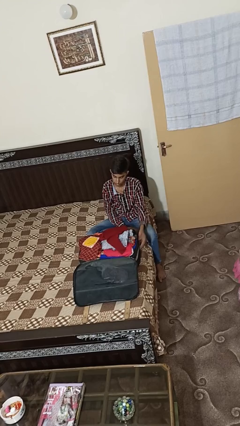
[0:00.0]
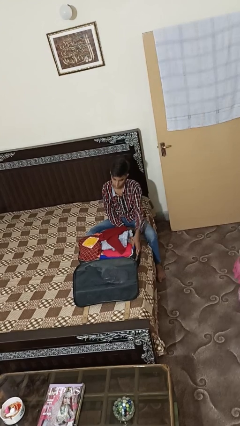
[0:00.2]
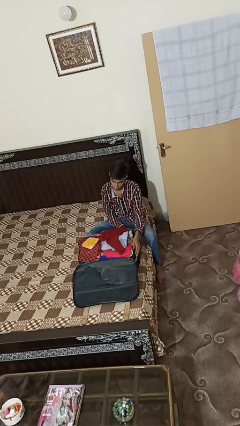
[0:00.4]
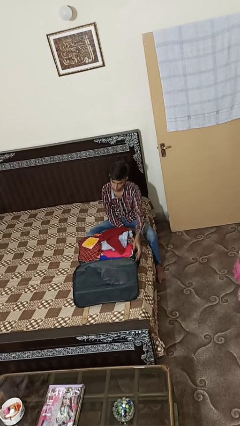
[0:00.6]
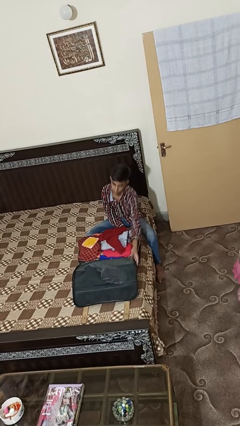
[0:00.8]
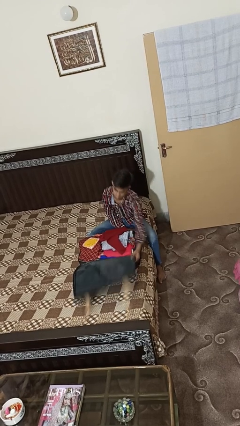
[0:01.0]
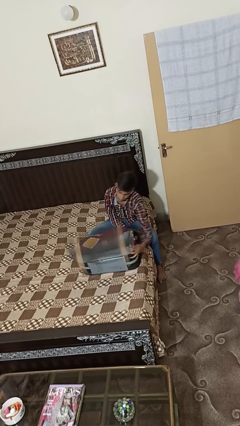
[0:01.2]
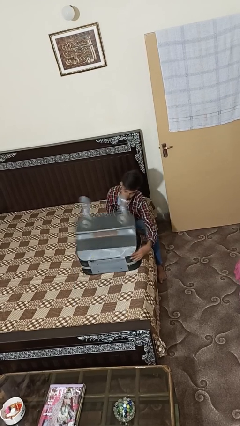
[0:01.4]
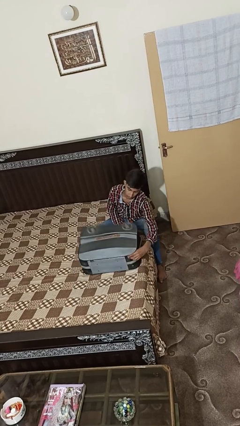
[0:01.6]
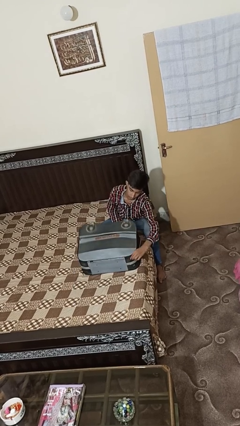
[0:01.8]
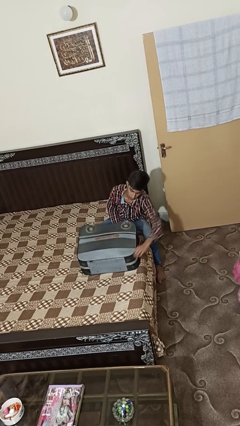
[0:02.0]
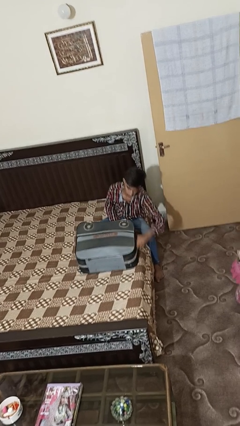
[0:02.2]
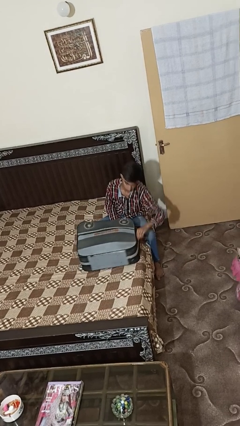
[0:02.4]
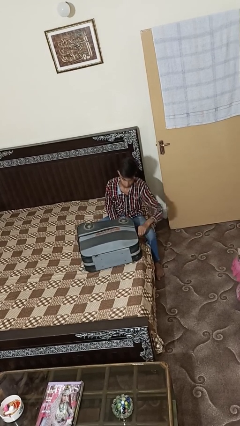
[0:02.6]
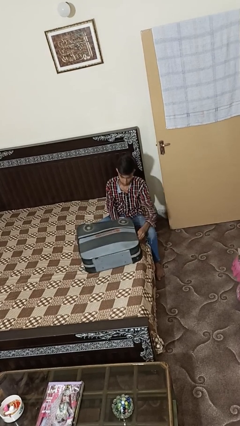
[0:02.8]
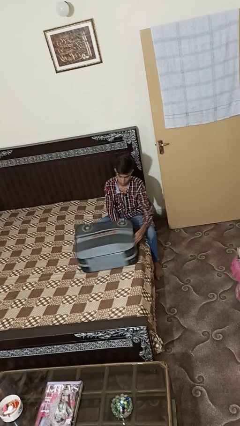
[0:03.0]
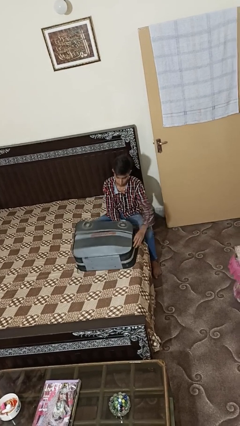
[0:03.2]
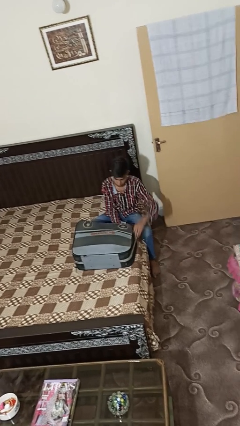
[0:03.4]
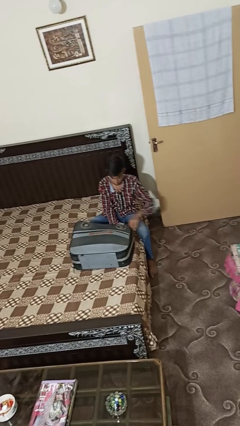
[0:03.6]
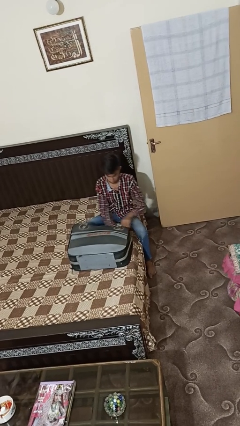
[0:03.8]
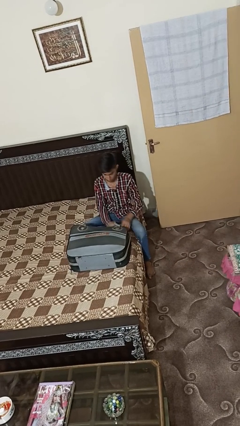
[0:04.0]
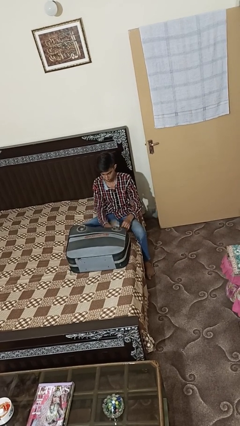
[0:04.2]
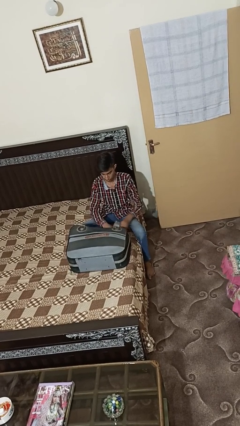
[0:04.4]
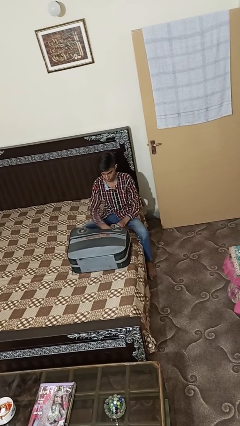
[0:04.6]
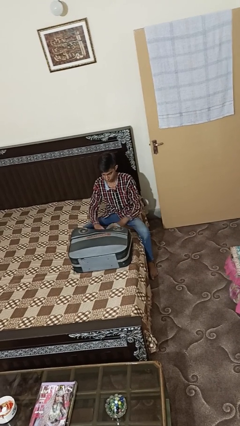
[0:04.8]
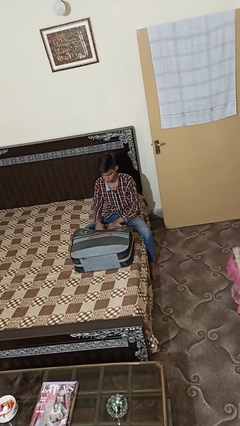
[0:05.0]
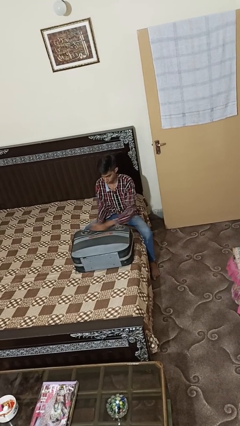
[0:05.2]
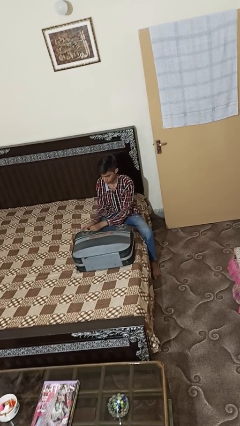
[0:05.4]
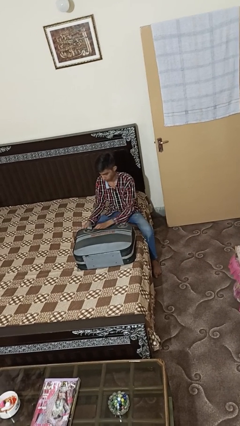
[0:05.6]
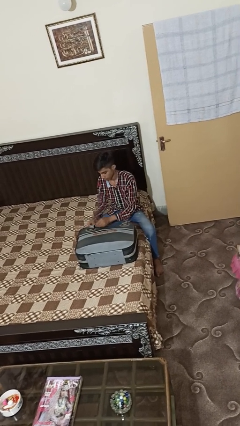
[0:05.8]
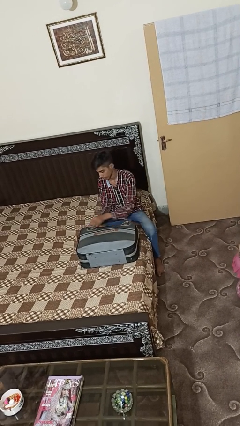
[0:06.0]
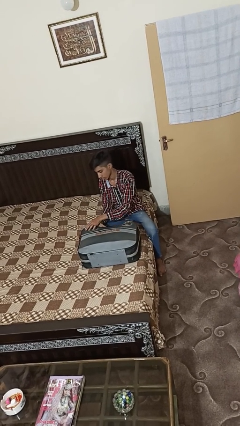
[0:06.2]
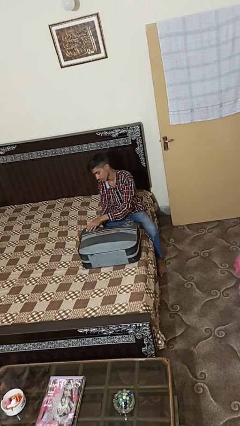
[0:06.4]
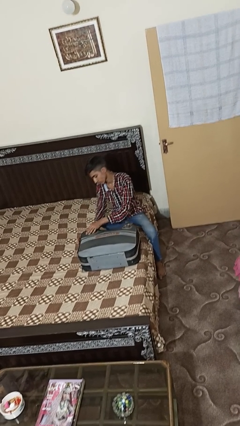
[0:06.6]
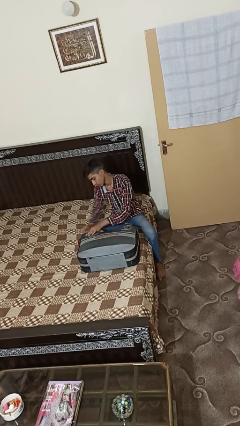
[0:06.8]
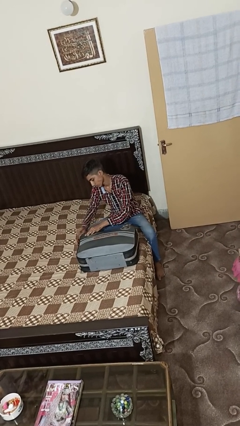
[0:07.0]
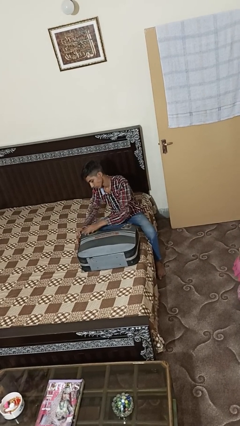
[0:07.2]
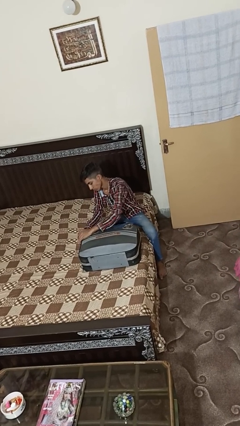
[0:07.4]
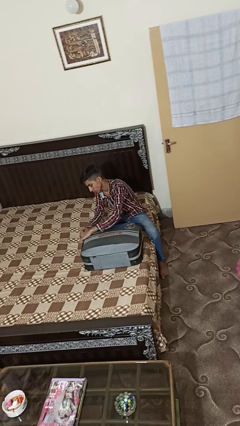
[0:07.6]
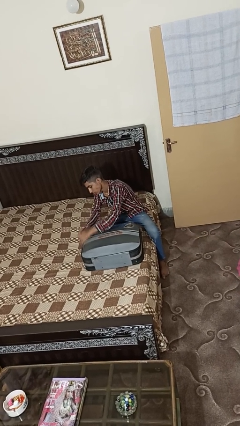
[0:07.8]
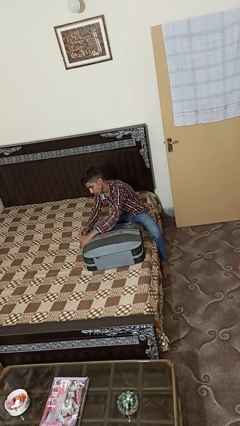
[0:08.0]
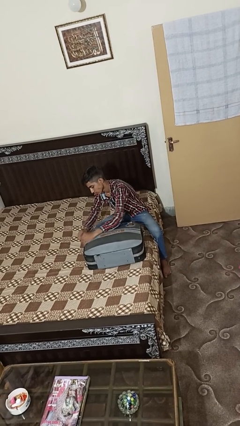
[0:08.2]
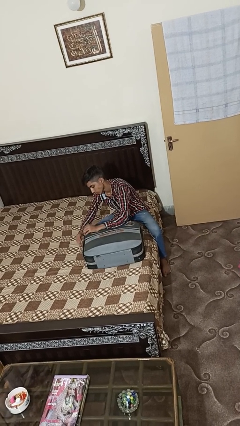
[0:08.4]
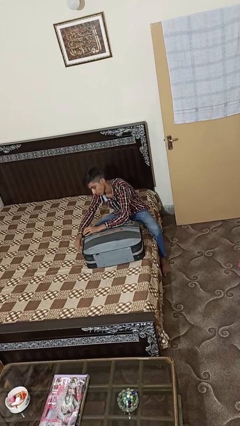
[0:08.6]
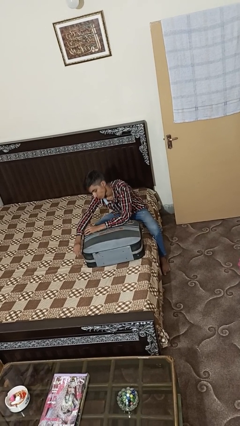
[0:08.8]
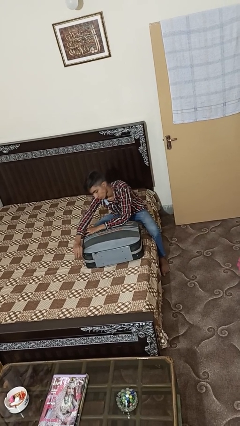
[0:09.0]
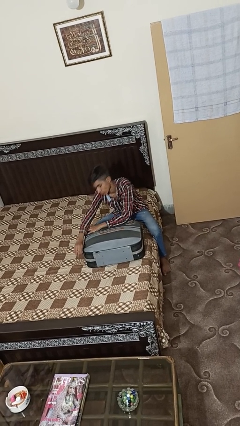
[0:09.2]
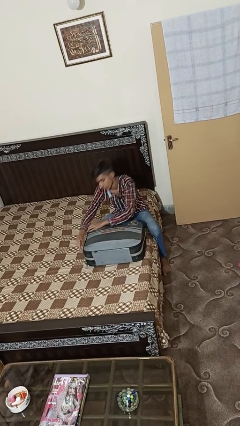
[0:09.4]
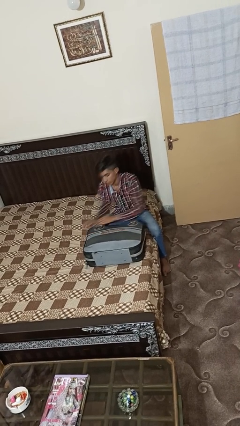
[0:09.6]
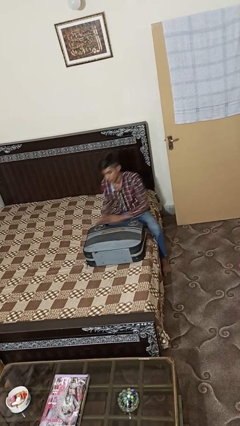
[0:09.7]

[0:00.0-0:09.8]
person closes suitcase

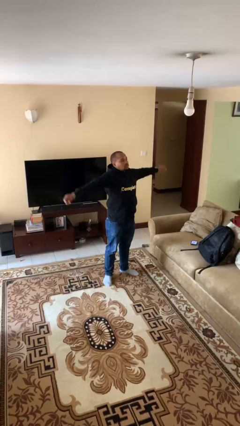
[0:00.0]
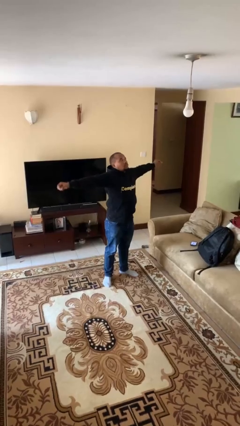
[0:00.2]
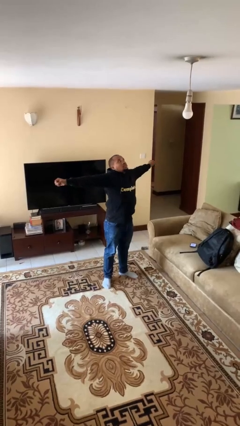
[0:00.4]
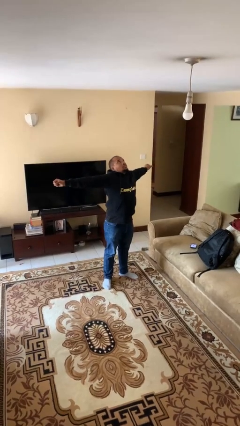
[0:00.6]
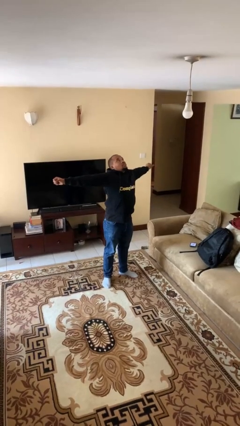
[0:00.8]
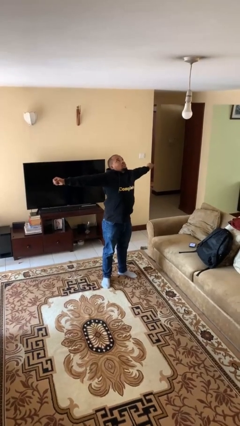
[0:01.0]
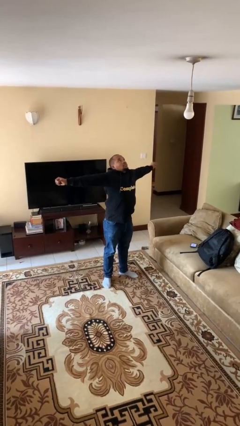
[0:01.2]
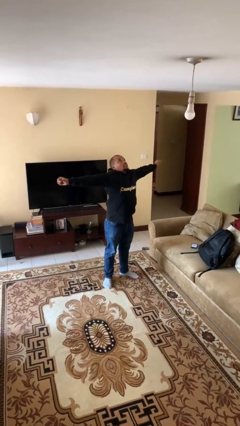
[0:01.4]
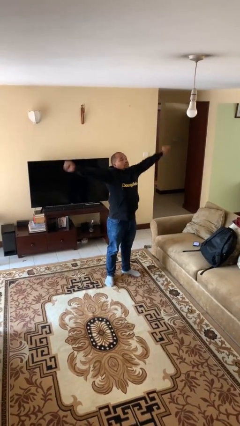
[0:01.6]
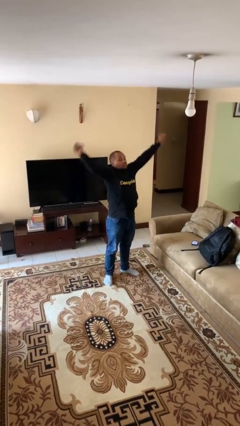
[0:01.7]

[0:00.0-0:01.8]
person stretches arms to side

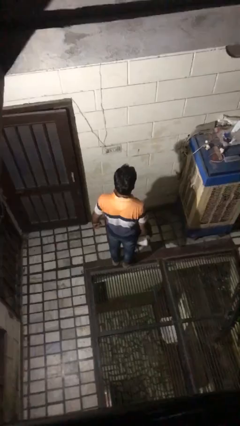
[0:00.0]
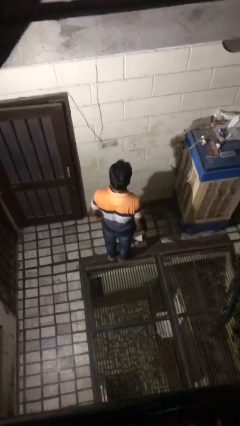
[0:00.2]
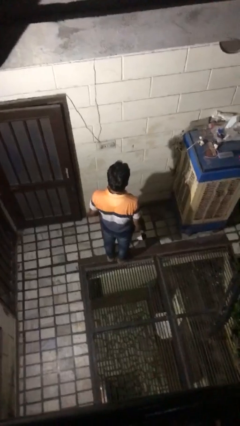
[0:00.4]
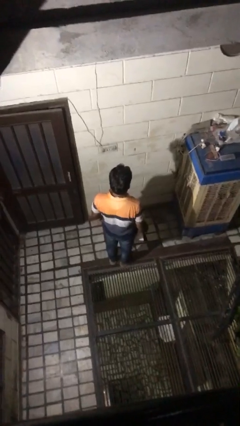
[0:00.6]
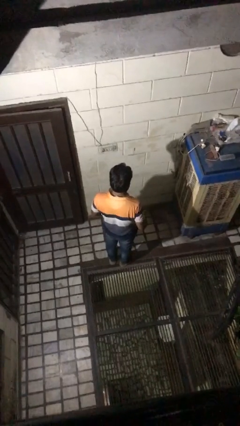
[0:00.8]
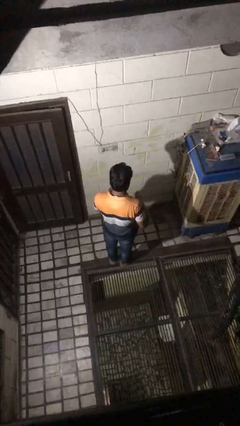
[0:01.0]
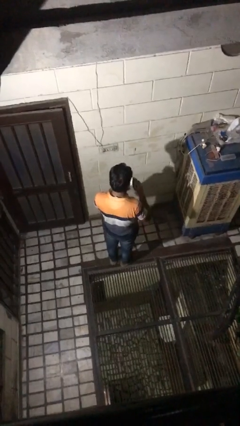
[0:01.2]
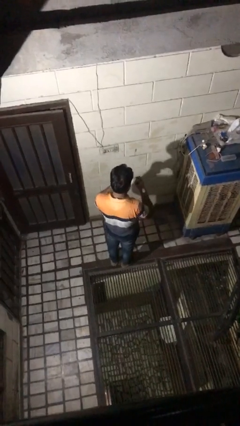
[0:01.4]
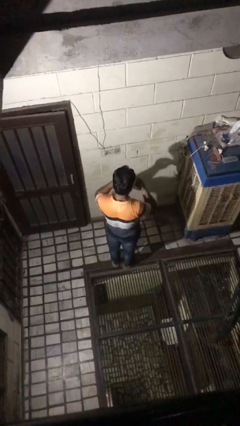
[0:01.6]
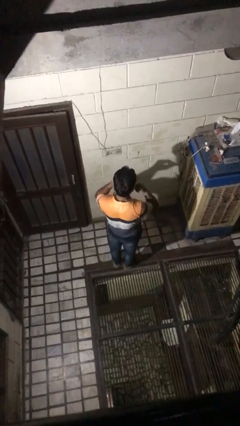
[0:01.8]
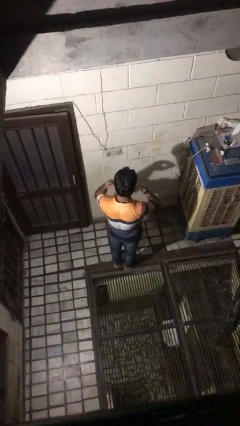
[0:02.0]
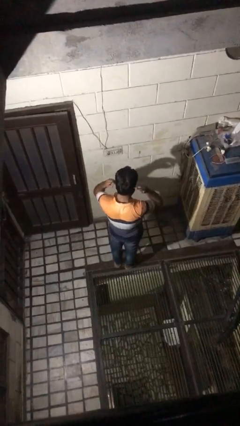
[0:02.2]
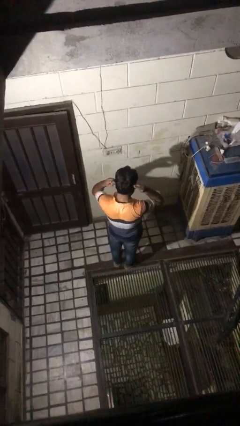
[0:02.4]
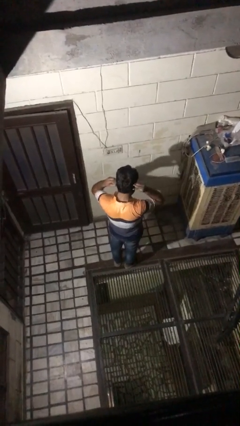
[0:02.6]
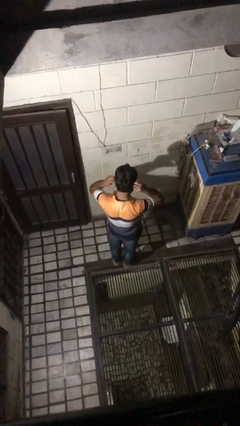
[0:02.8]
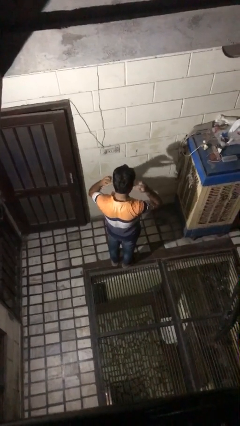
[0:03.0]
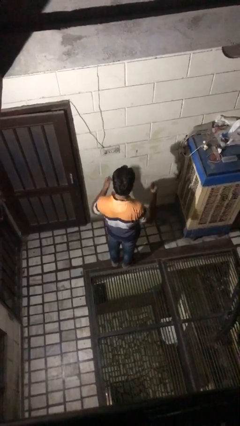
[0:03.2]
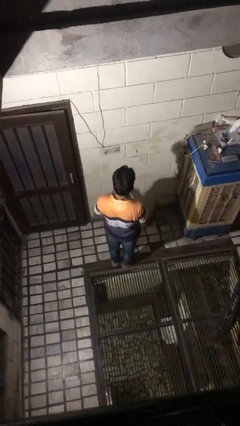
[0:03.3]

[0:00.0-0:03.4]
person puts on facemask

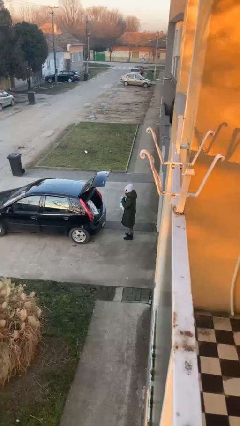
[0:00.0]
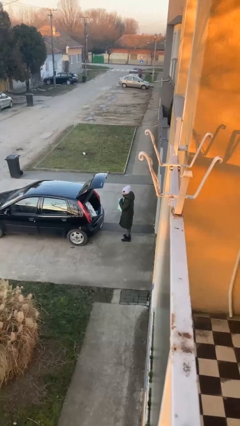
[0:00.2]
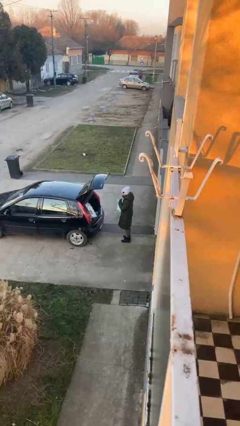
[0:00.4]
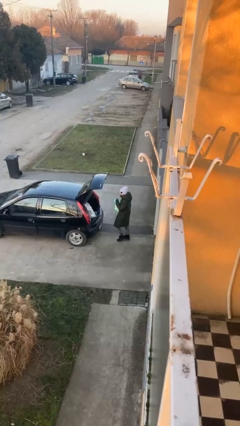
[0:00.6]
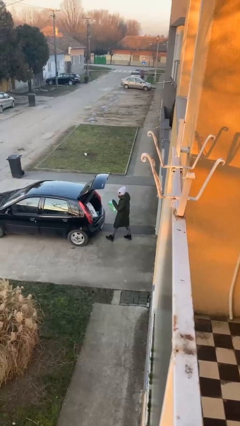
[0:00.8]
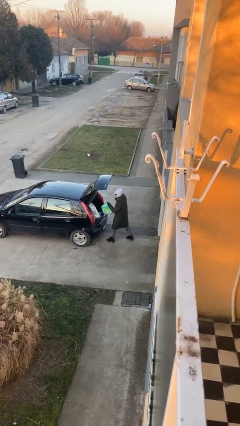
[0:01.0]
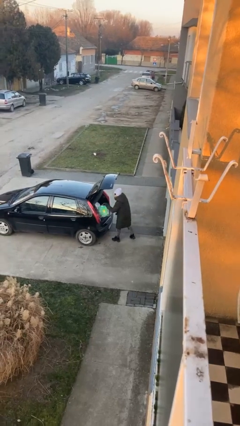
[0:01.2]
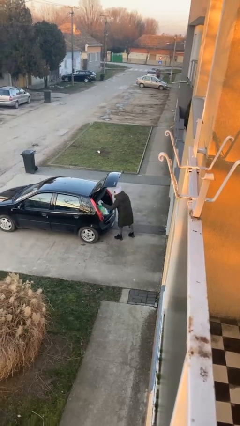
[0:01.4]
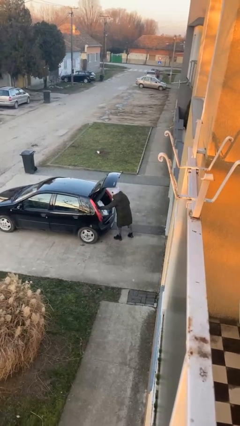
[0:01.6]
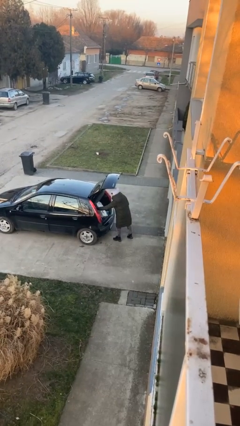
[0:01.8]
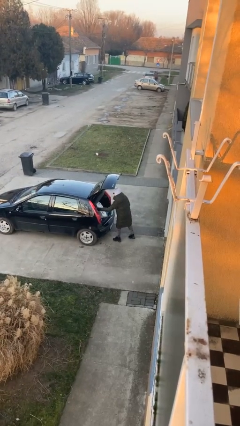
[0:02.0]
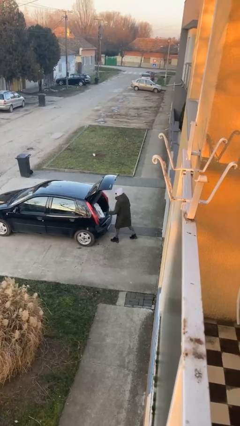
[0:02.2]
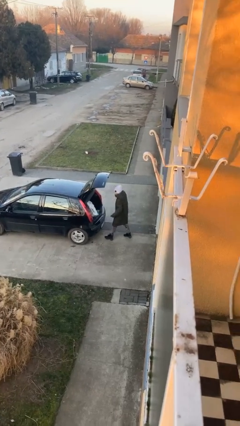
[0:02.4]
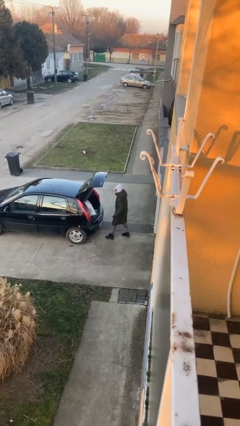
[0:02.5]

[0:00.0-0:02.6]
person loads car
